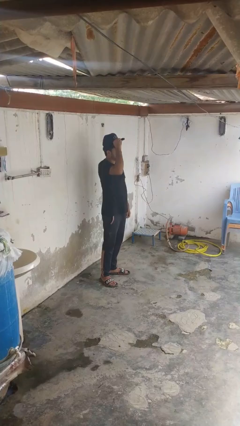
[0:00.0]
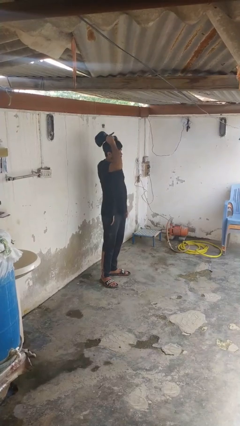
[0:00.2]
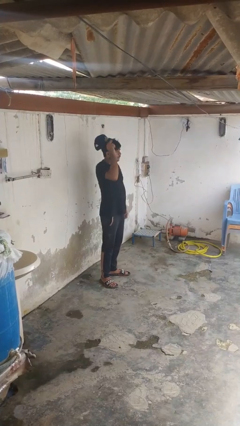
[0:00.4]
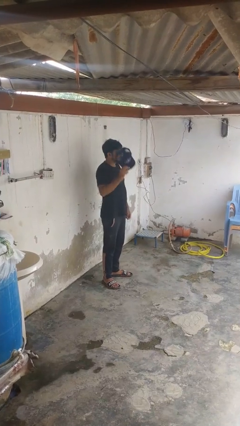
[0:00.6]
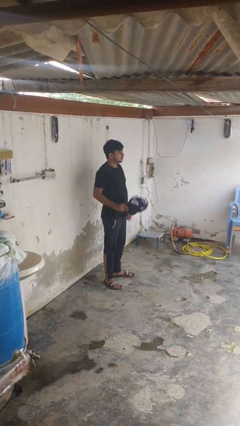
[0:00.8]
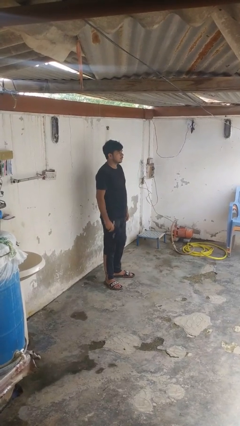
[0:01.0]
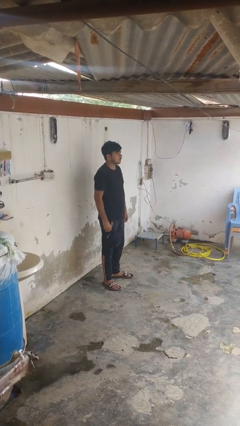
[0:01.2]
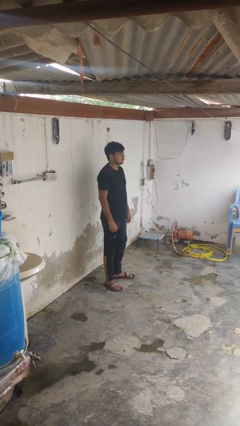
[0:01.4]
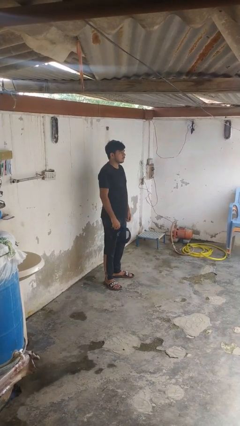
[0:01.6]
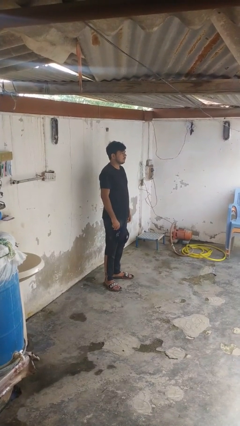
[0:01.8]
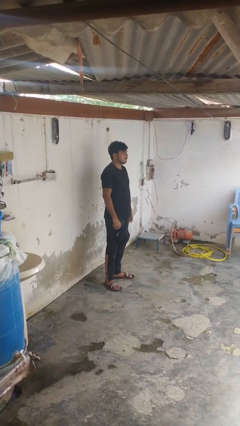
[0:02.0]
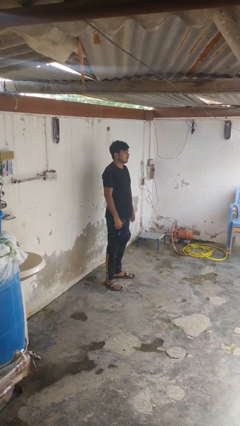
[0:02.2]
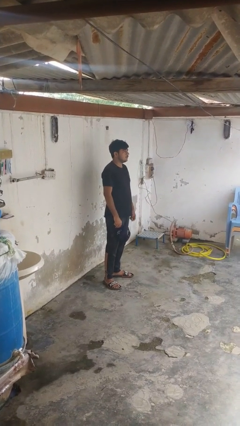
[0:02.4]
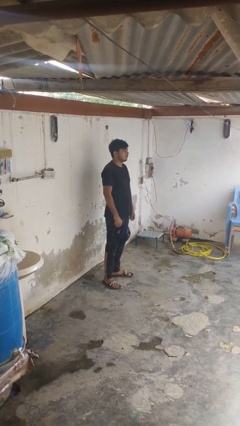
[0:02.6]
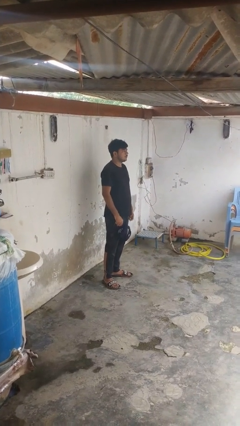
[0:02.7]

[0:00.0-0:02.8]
person takes off hat

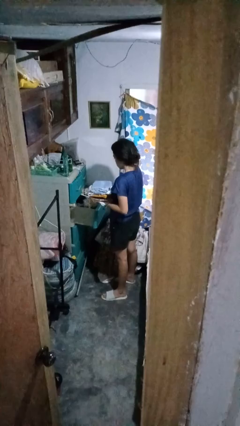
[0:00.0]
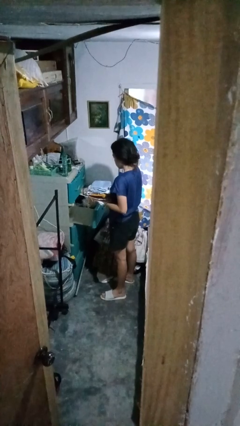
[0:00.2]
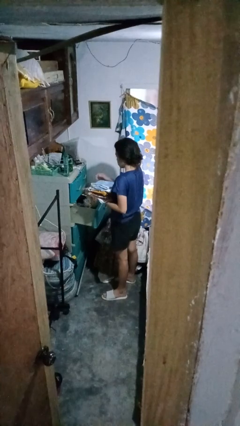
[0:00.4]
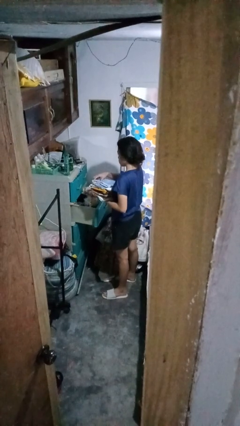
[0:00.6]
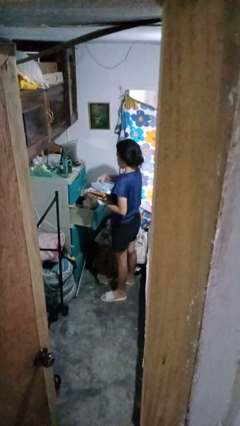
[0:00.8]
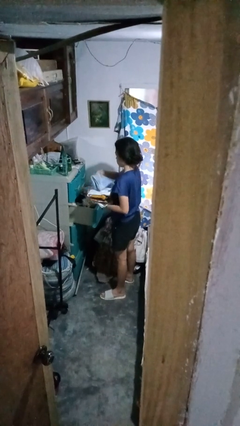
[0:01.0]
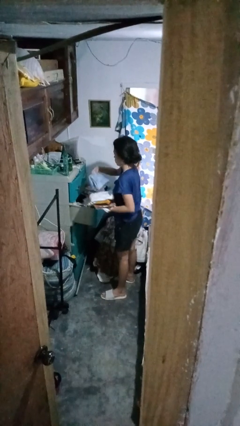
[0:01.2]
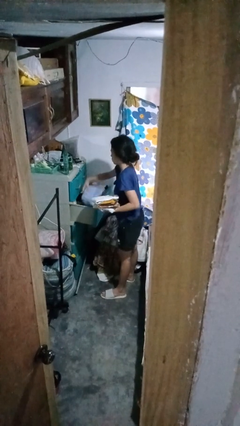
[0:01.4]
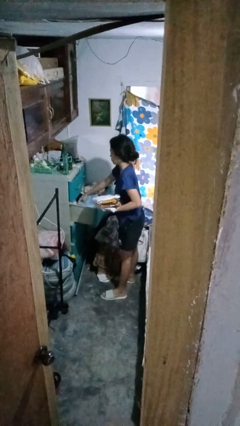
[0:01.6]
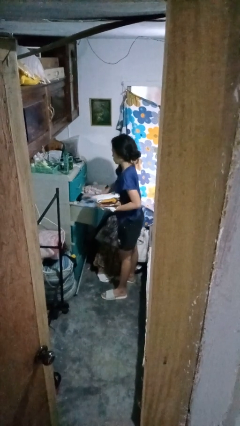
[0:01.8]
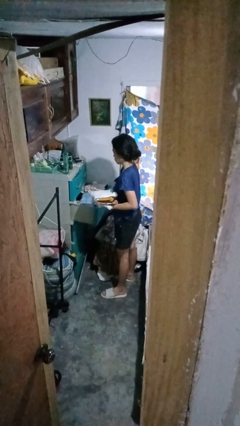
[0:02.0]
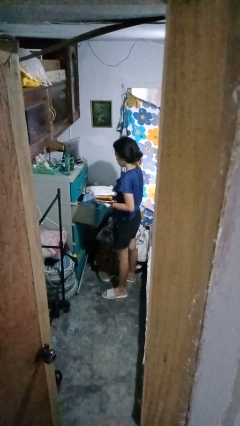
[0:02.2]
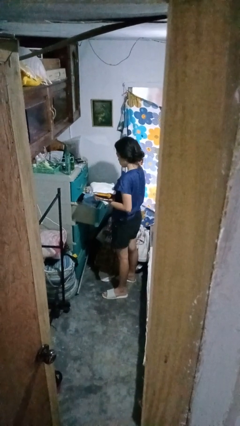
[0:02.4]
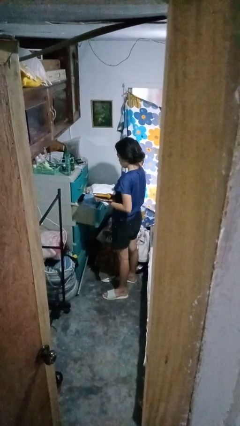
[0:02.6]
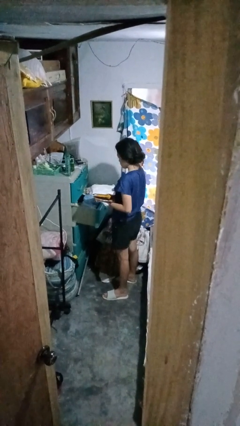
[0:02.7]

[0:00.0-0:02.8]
person puts clothes into dresser

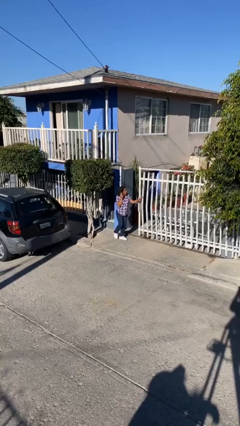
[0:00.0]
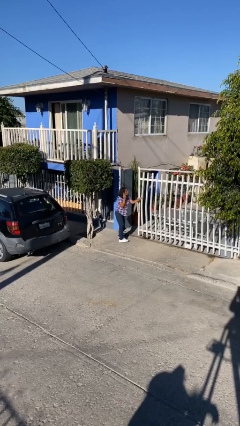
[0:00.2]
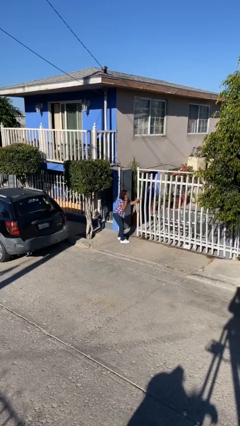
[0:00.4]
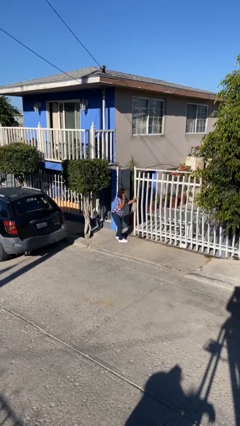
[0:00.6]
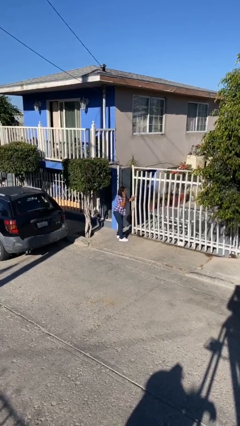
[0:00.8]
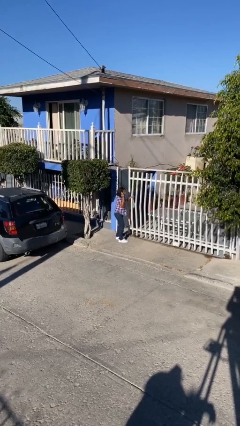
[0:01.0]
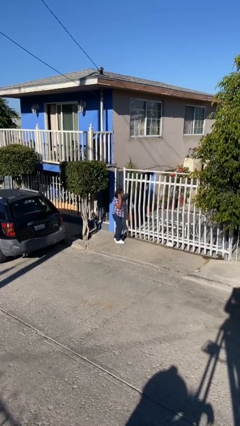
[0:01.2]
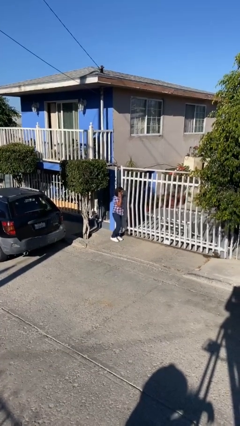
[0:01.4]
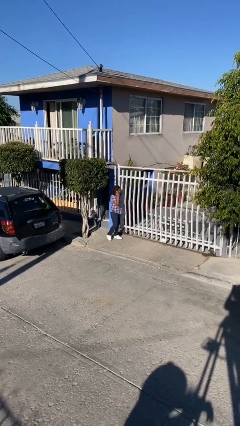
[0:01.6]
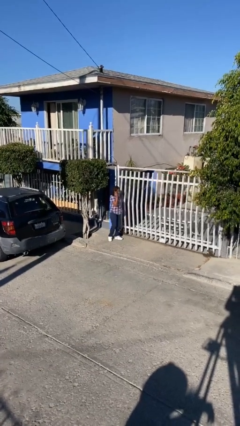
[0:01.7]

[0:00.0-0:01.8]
person closes facility door

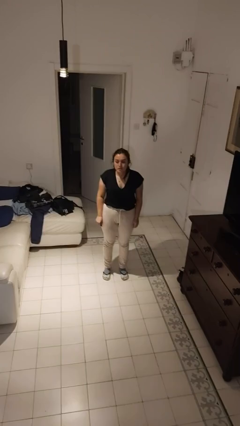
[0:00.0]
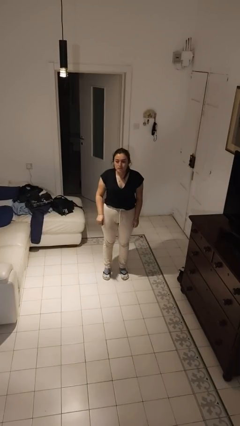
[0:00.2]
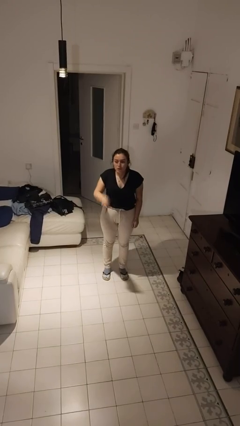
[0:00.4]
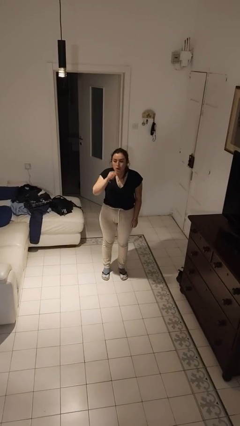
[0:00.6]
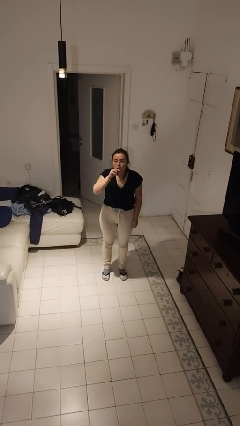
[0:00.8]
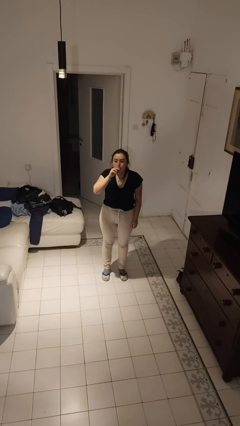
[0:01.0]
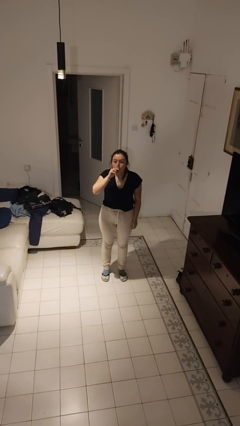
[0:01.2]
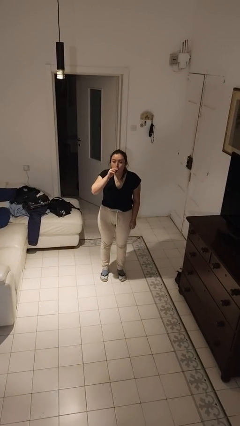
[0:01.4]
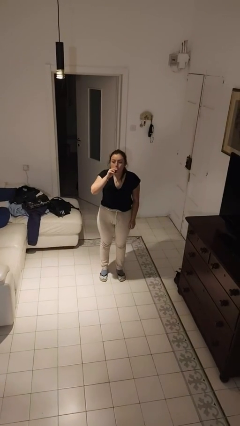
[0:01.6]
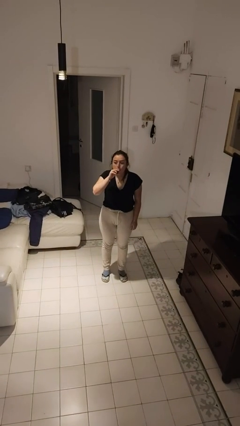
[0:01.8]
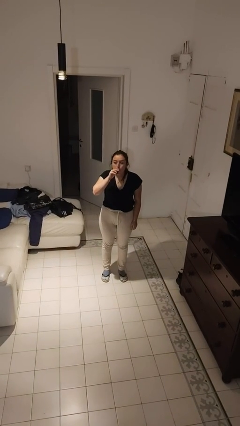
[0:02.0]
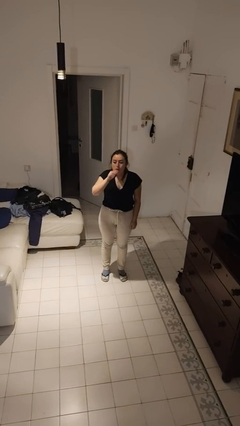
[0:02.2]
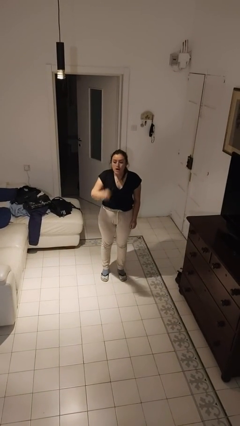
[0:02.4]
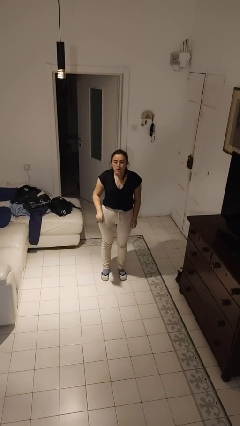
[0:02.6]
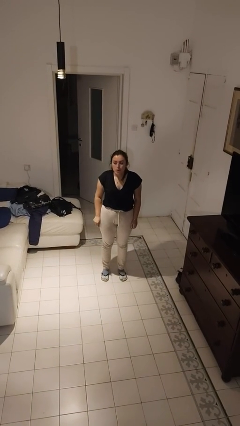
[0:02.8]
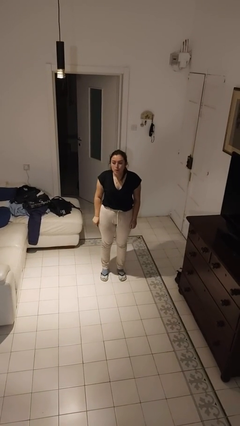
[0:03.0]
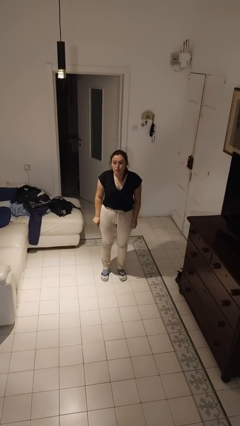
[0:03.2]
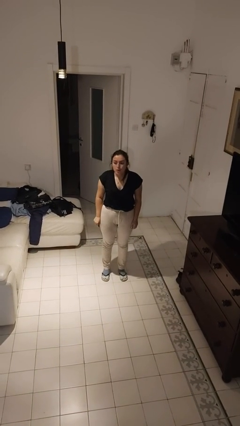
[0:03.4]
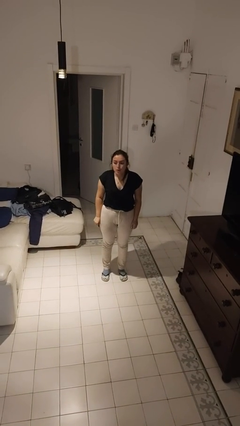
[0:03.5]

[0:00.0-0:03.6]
person vapes

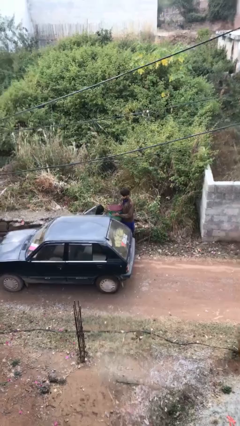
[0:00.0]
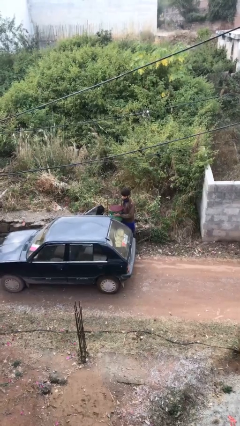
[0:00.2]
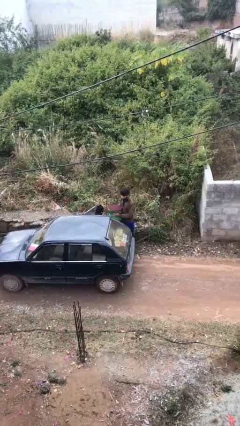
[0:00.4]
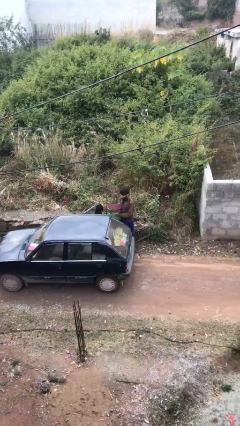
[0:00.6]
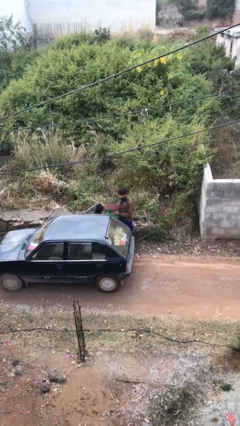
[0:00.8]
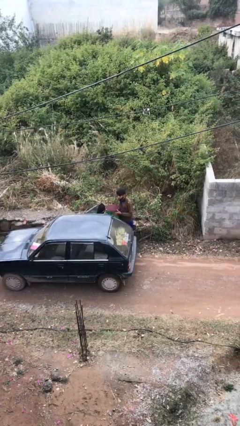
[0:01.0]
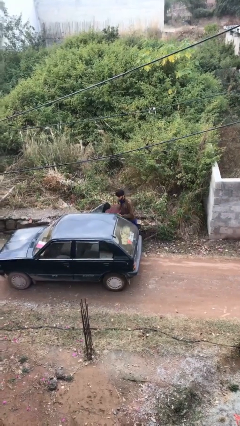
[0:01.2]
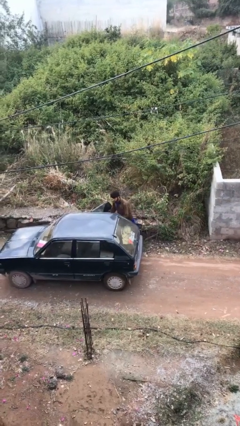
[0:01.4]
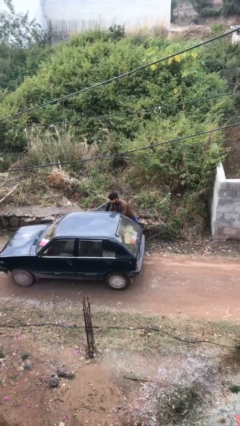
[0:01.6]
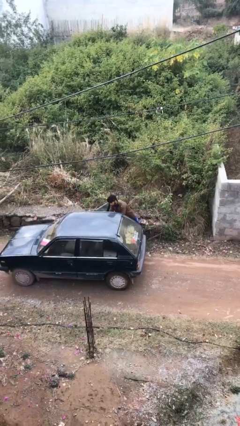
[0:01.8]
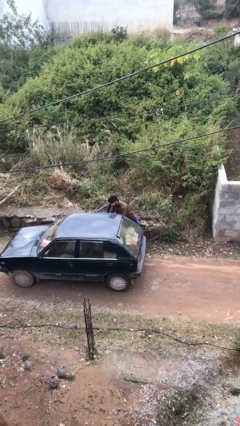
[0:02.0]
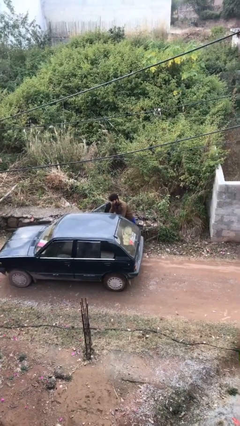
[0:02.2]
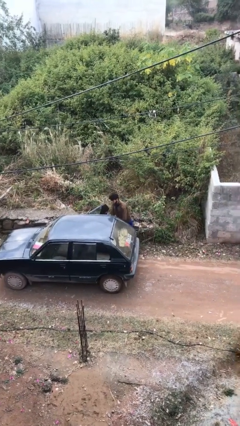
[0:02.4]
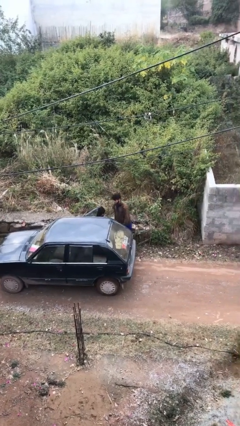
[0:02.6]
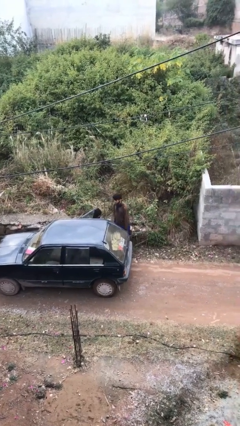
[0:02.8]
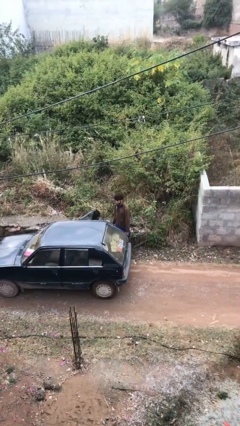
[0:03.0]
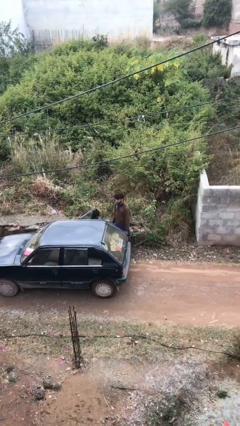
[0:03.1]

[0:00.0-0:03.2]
person loads car

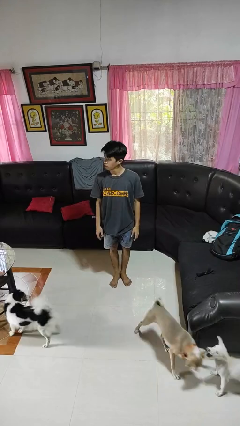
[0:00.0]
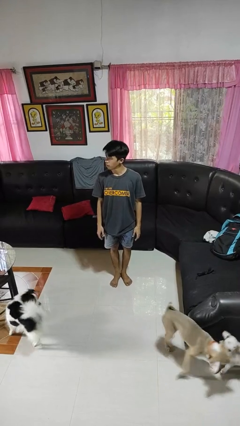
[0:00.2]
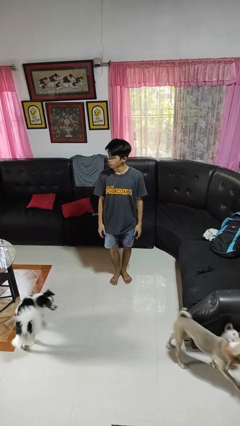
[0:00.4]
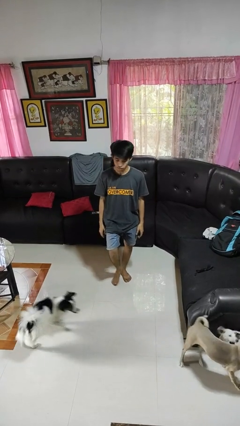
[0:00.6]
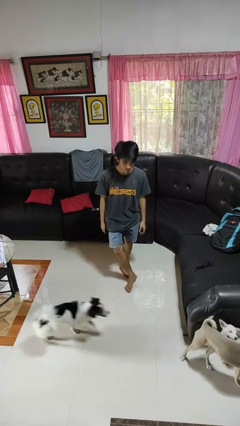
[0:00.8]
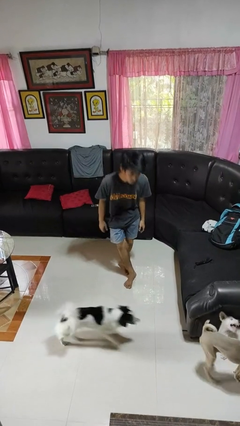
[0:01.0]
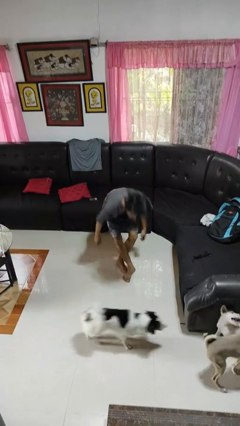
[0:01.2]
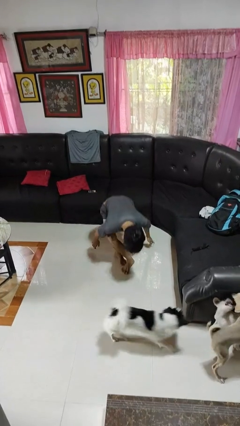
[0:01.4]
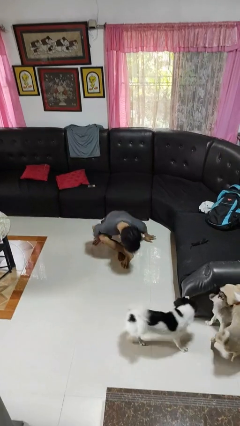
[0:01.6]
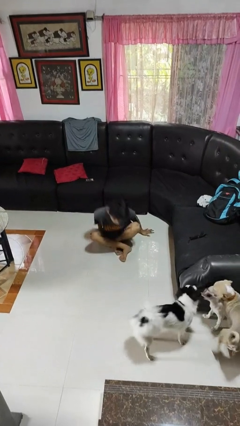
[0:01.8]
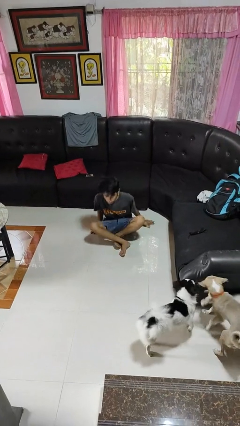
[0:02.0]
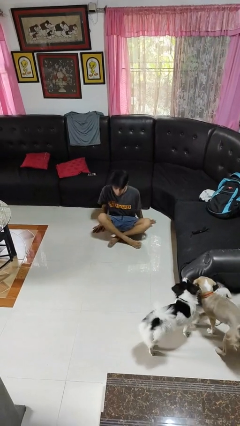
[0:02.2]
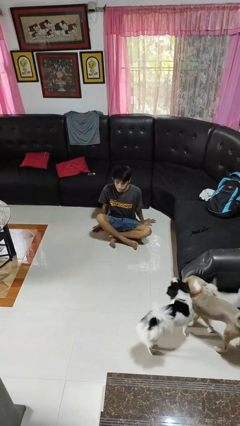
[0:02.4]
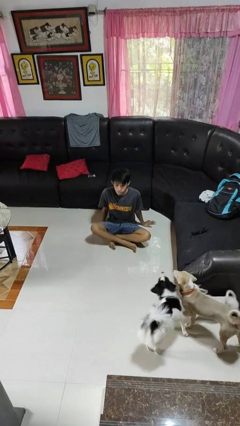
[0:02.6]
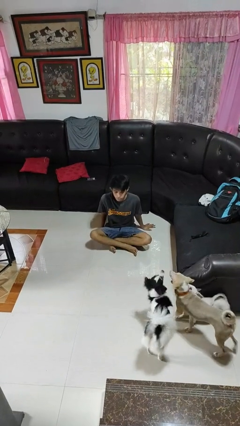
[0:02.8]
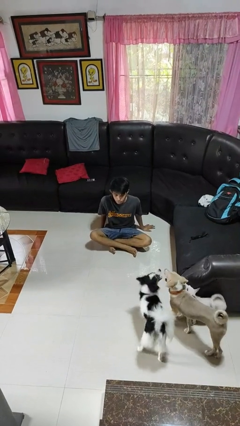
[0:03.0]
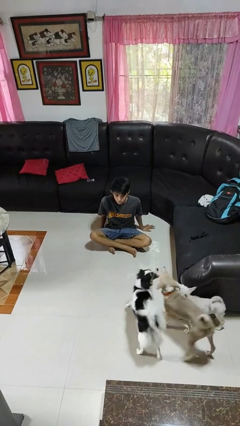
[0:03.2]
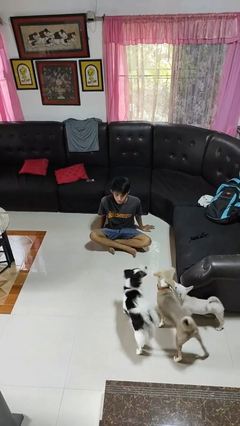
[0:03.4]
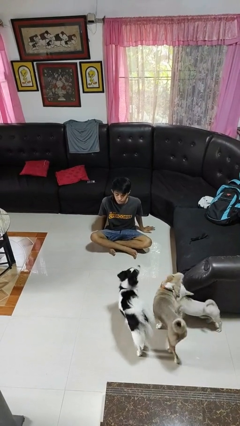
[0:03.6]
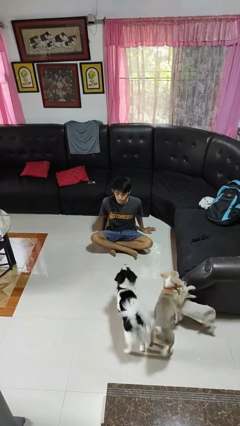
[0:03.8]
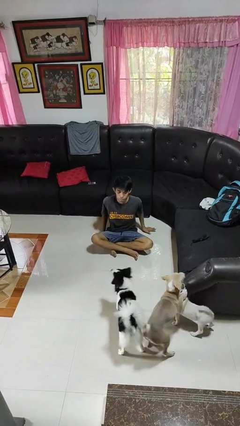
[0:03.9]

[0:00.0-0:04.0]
person sits crisscross
